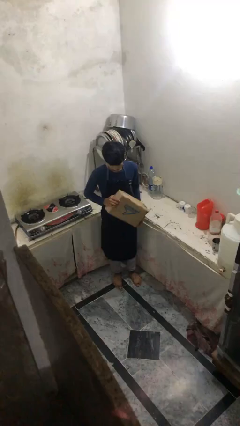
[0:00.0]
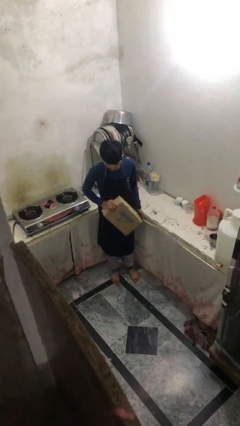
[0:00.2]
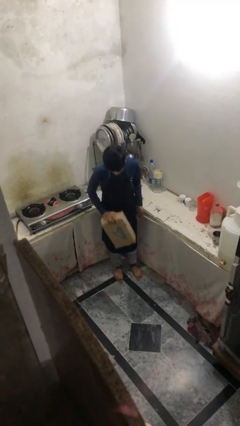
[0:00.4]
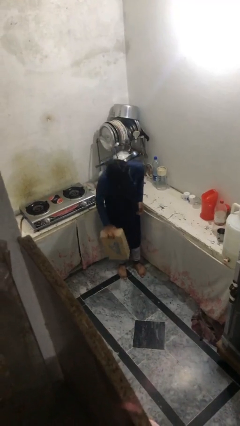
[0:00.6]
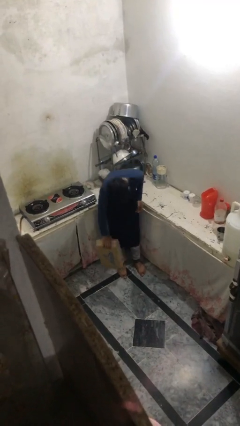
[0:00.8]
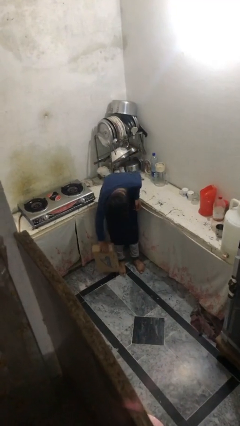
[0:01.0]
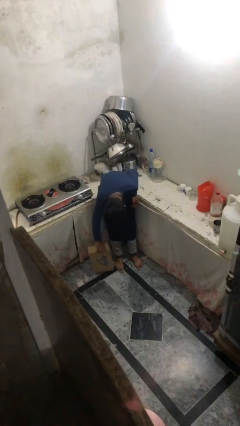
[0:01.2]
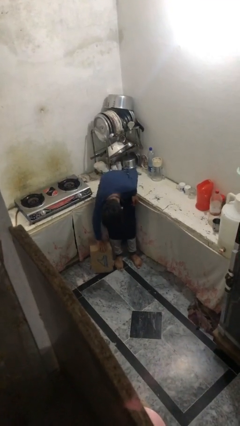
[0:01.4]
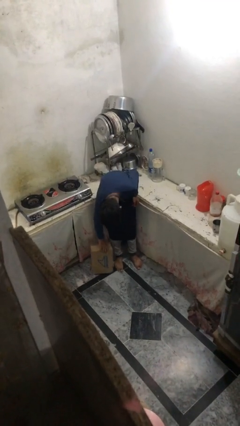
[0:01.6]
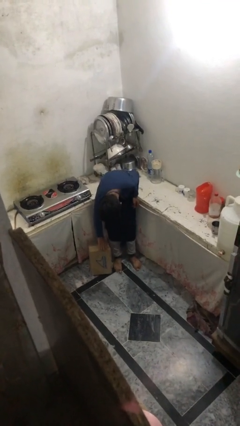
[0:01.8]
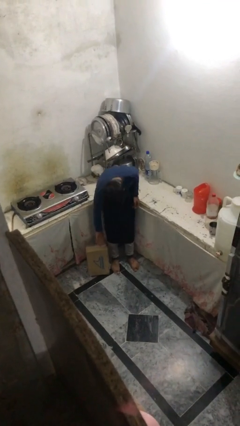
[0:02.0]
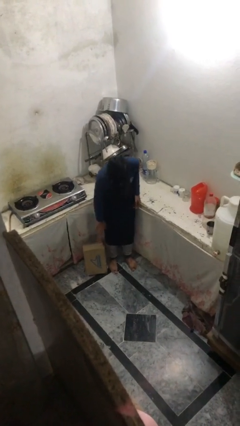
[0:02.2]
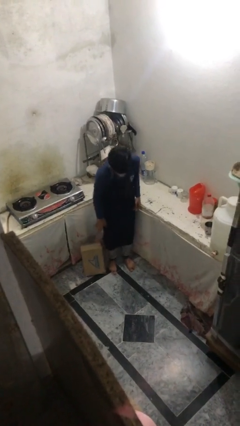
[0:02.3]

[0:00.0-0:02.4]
person puts down object on floor

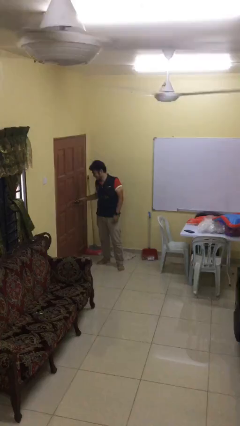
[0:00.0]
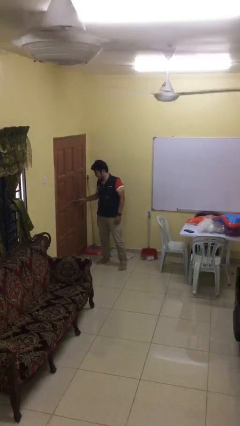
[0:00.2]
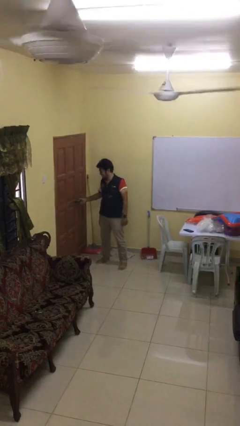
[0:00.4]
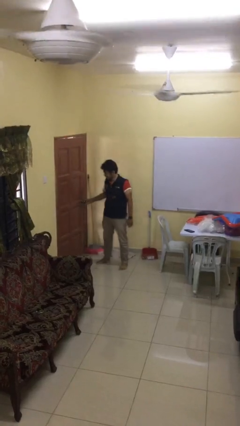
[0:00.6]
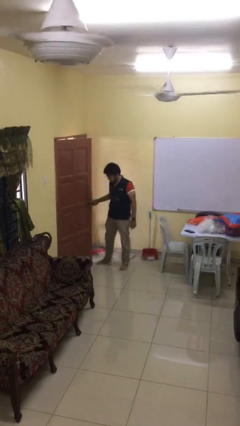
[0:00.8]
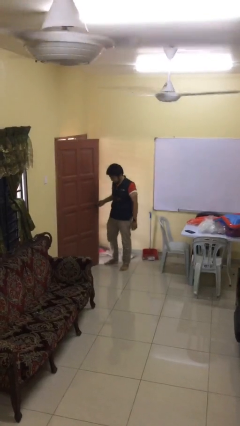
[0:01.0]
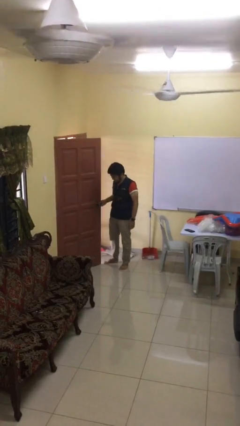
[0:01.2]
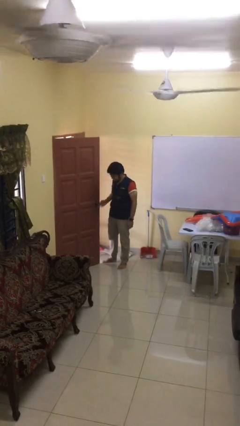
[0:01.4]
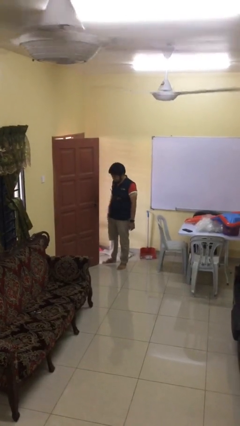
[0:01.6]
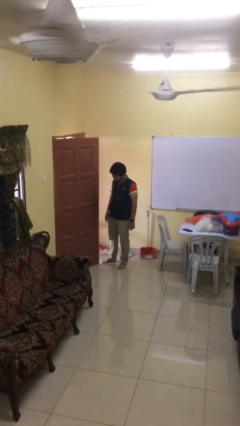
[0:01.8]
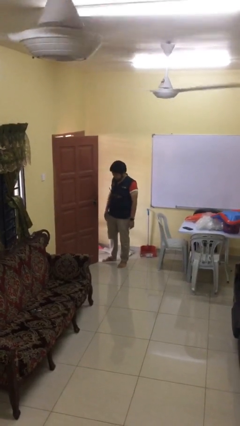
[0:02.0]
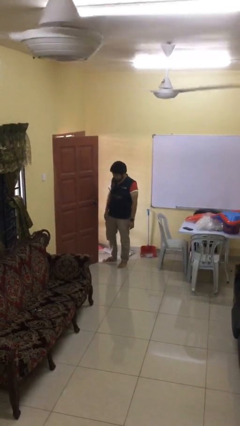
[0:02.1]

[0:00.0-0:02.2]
person opens facility door

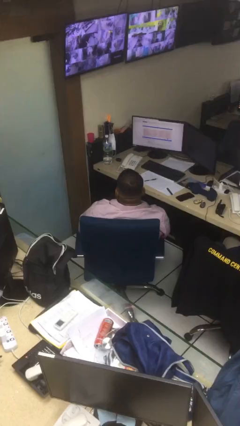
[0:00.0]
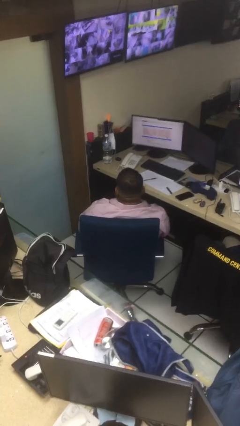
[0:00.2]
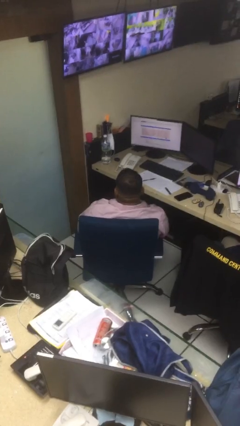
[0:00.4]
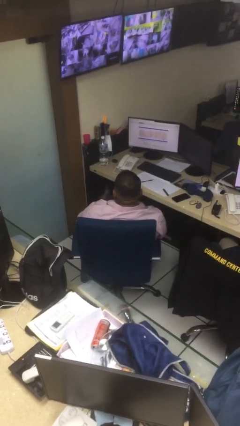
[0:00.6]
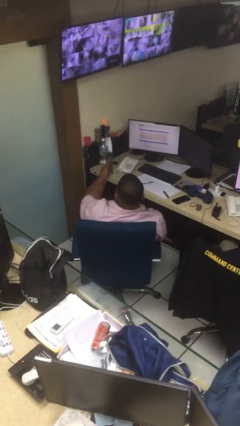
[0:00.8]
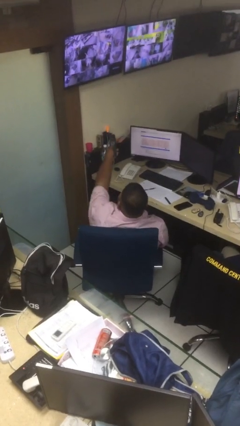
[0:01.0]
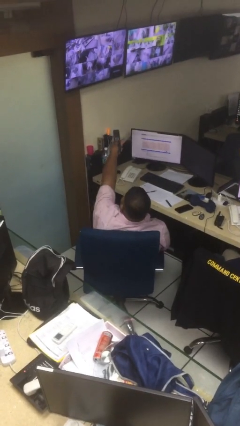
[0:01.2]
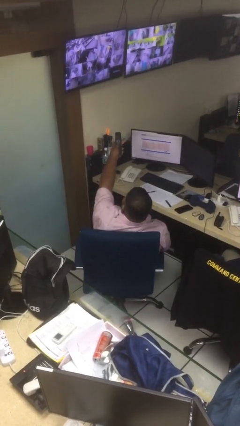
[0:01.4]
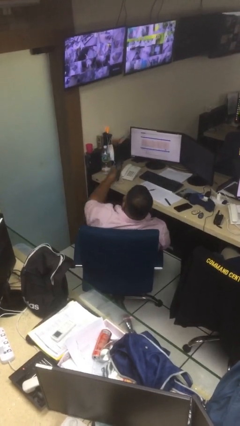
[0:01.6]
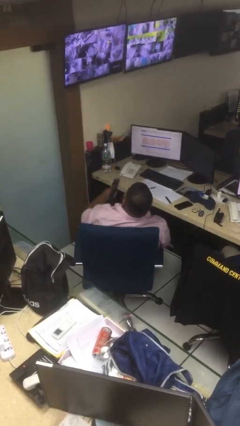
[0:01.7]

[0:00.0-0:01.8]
person uses television remote

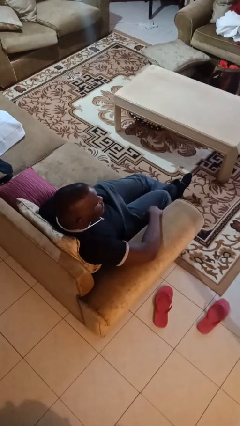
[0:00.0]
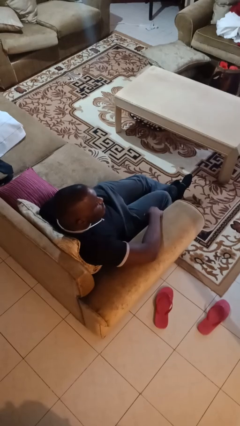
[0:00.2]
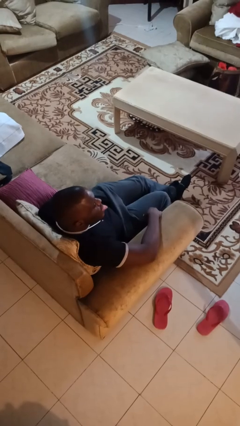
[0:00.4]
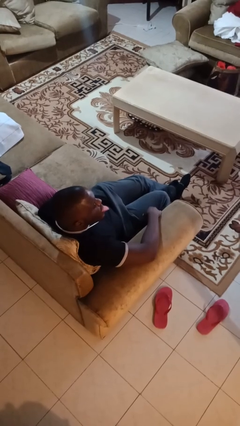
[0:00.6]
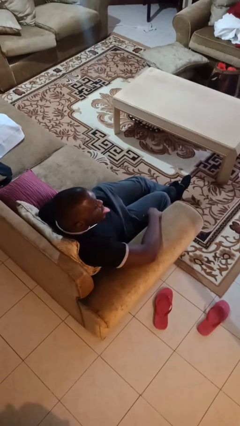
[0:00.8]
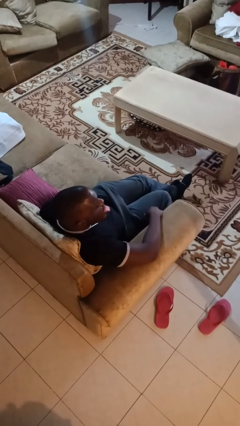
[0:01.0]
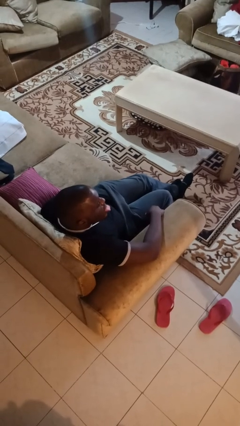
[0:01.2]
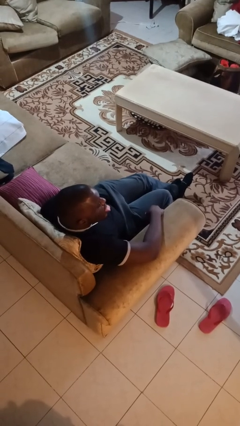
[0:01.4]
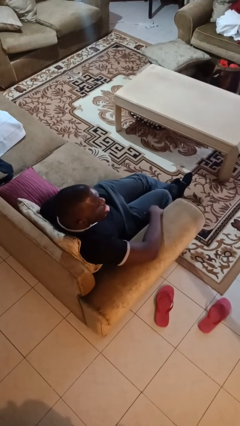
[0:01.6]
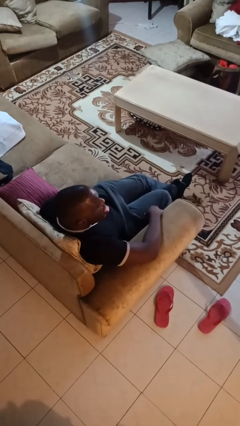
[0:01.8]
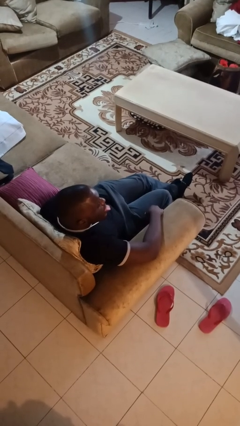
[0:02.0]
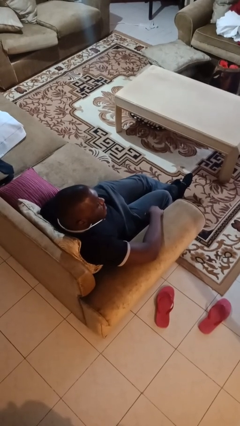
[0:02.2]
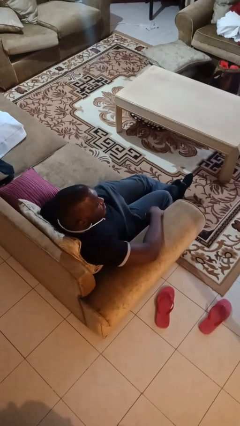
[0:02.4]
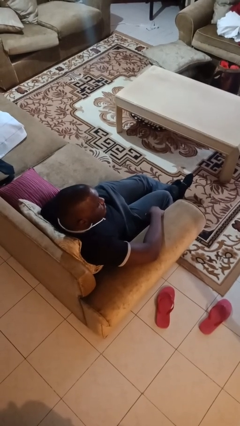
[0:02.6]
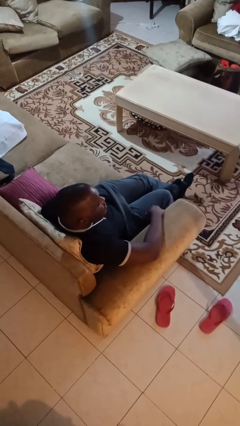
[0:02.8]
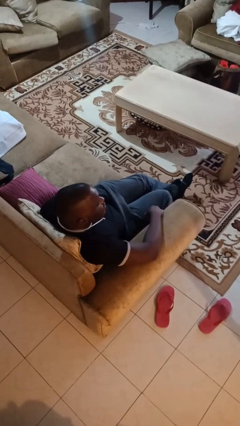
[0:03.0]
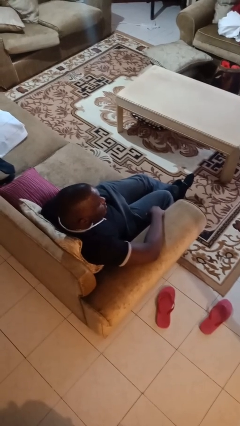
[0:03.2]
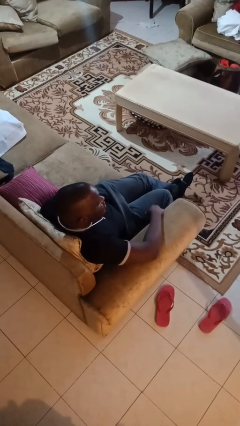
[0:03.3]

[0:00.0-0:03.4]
person sticks out tongue

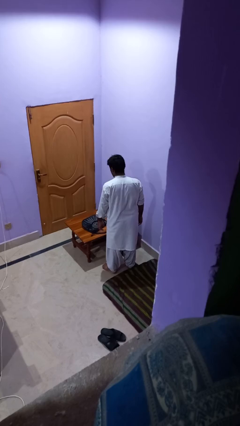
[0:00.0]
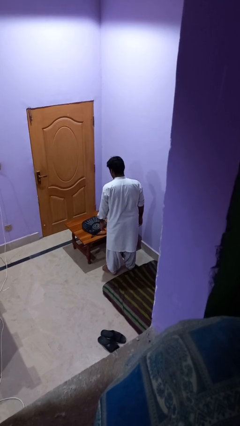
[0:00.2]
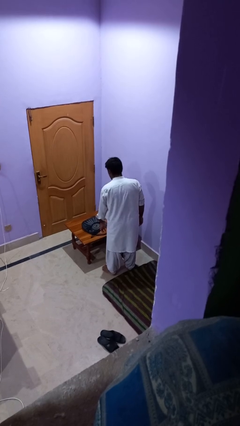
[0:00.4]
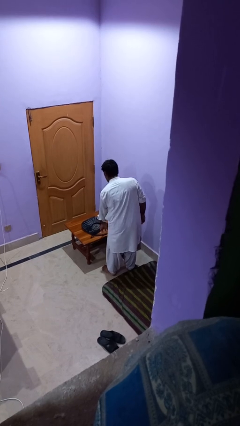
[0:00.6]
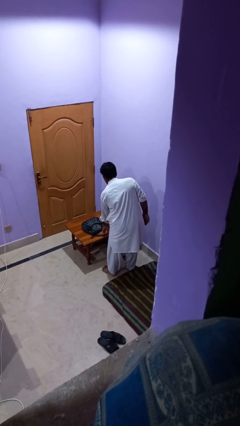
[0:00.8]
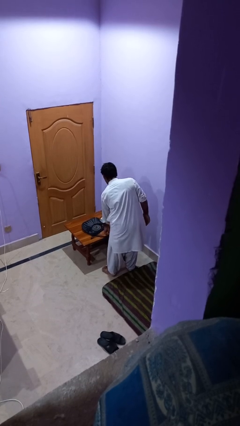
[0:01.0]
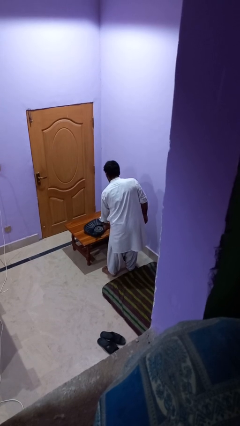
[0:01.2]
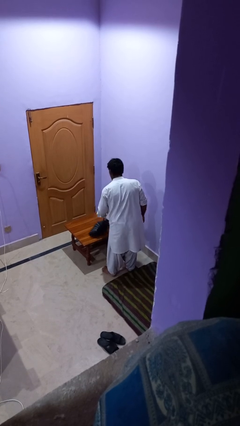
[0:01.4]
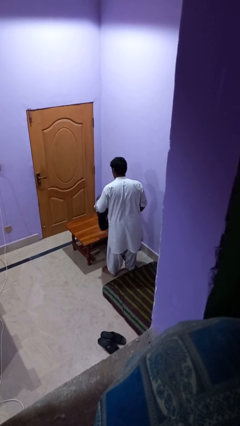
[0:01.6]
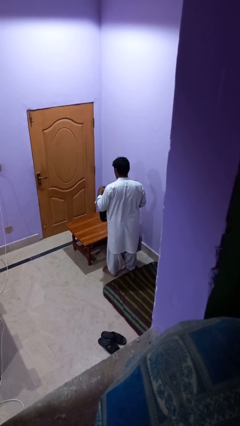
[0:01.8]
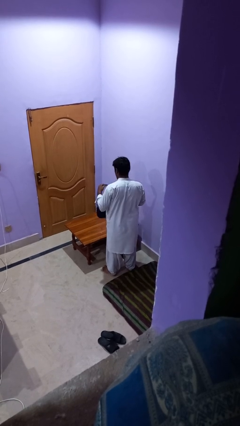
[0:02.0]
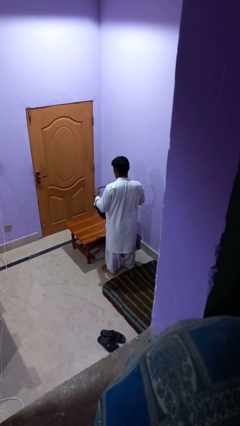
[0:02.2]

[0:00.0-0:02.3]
person picks up object from table

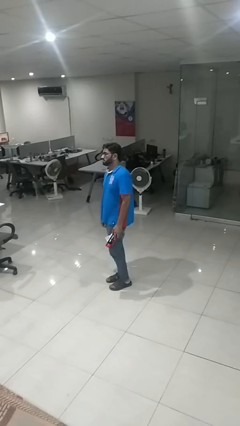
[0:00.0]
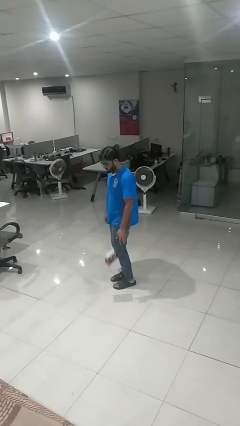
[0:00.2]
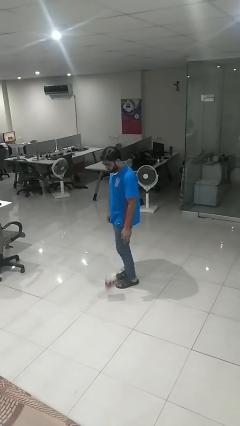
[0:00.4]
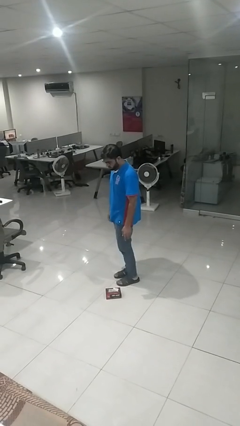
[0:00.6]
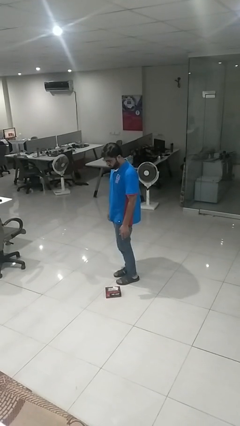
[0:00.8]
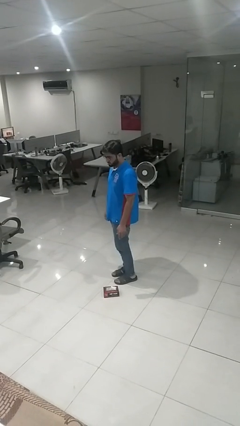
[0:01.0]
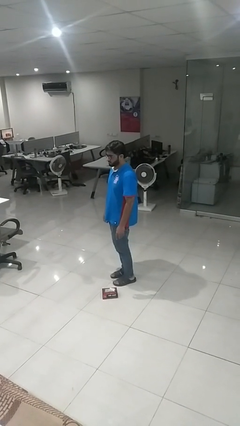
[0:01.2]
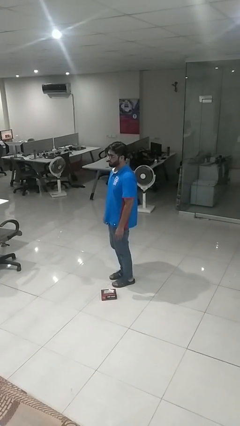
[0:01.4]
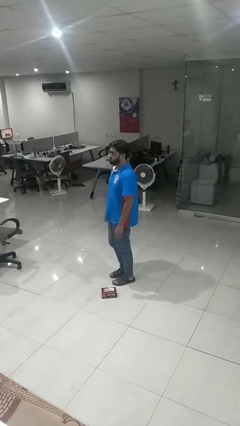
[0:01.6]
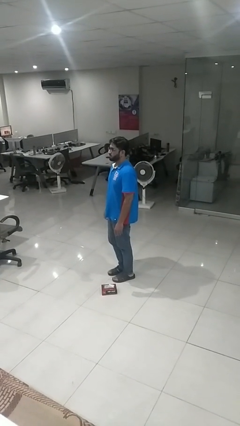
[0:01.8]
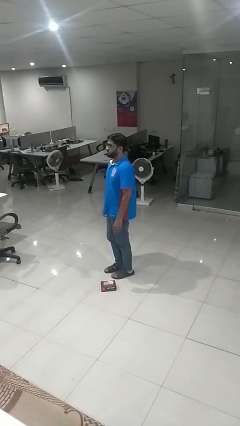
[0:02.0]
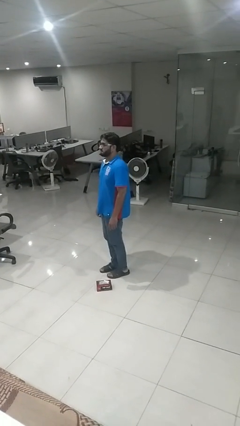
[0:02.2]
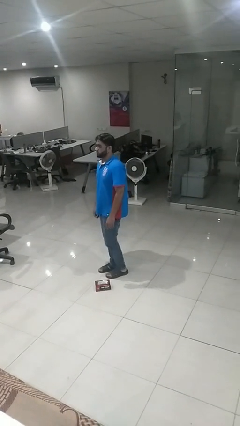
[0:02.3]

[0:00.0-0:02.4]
person drops object

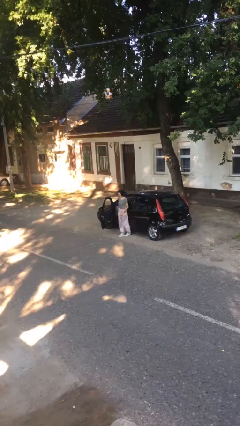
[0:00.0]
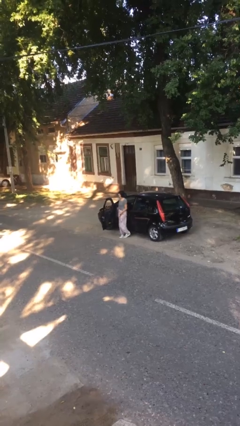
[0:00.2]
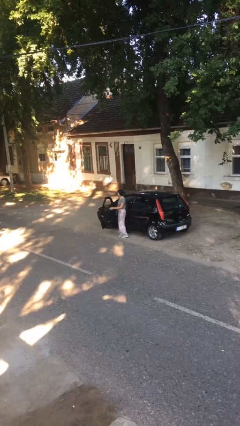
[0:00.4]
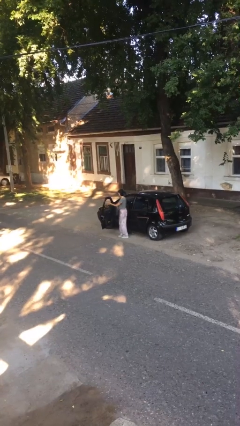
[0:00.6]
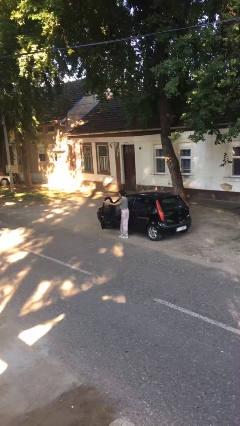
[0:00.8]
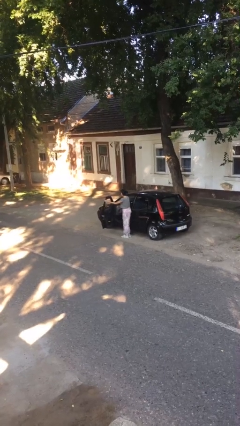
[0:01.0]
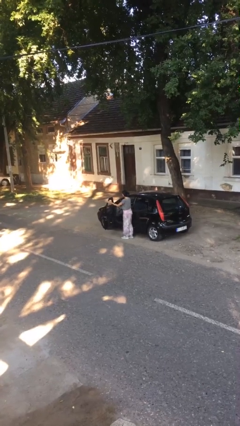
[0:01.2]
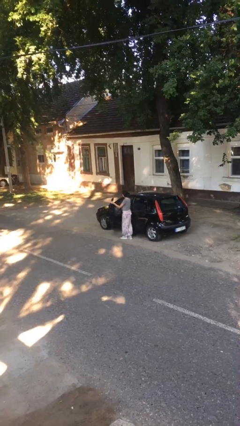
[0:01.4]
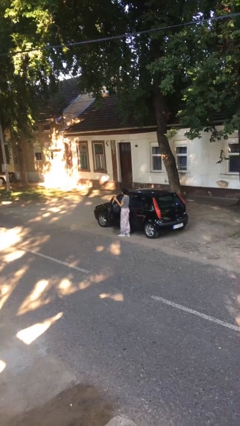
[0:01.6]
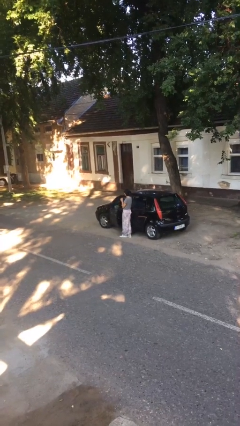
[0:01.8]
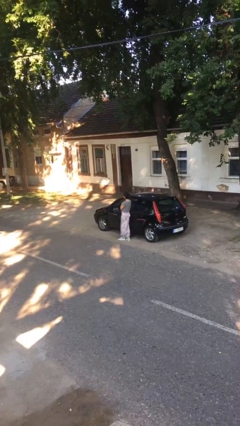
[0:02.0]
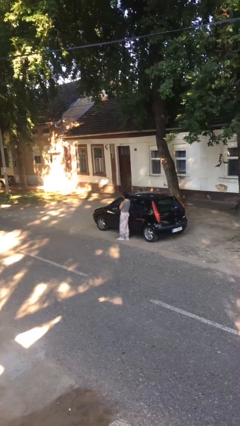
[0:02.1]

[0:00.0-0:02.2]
person closes car door

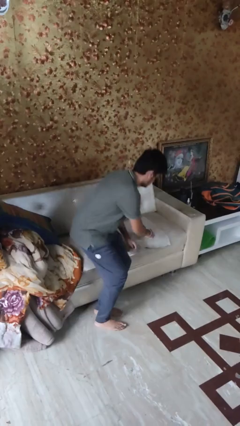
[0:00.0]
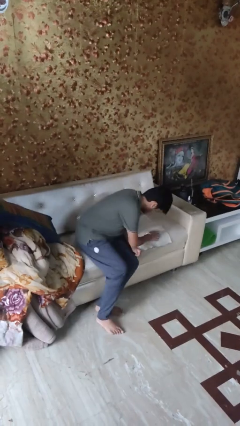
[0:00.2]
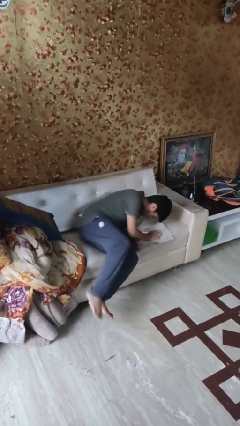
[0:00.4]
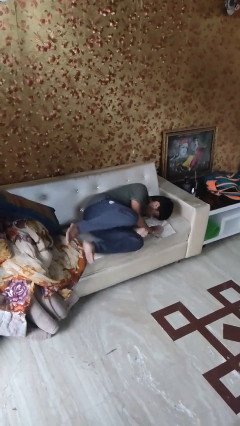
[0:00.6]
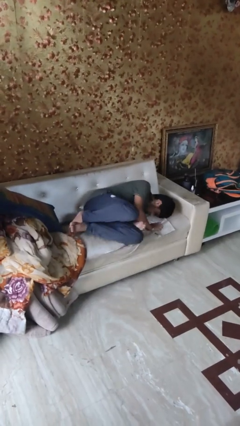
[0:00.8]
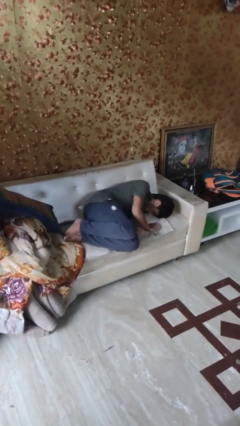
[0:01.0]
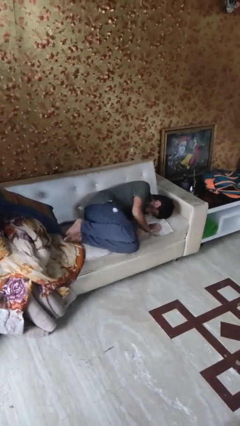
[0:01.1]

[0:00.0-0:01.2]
person lies down on couch
